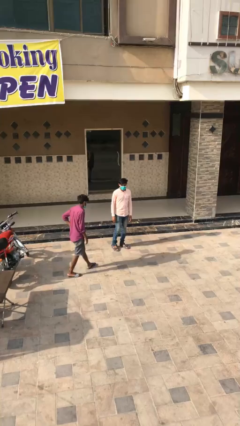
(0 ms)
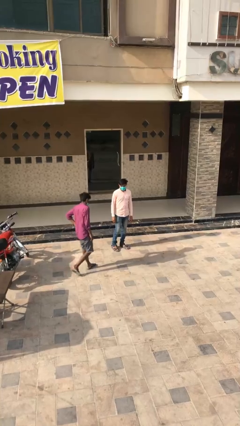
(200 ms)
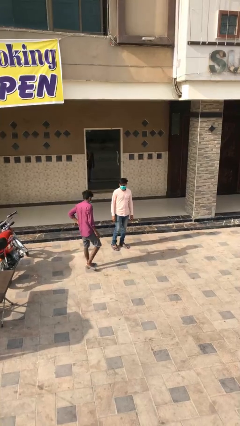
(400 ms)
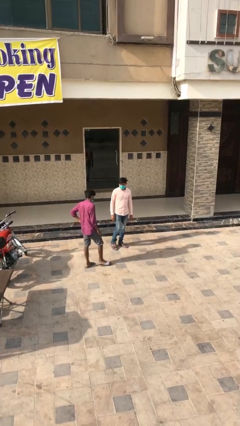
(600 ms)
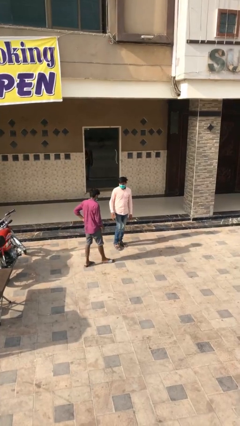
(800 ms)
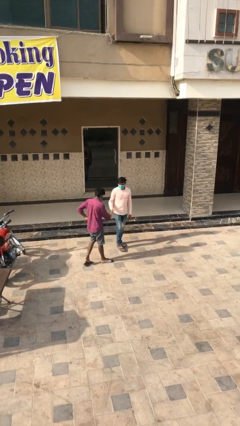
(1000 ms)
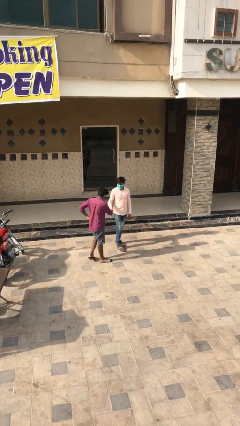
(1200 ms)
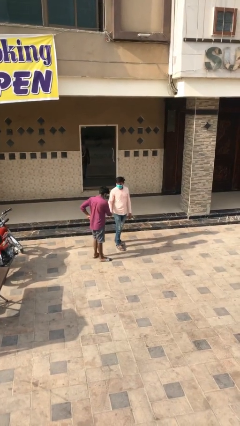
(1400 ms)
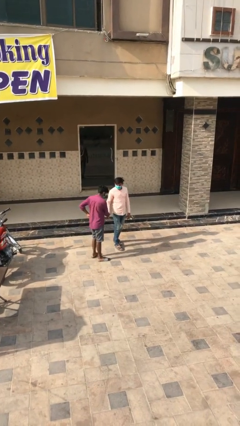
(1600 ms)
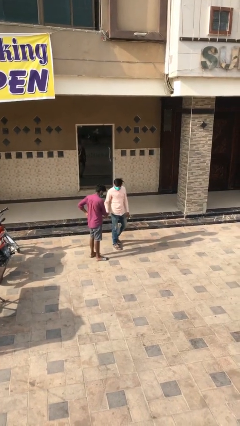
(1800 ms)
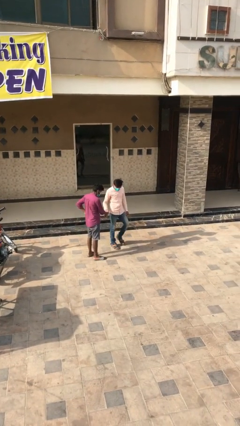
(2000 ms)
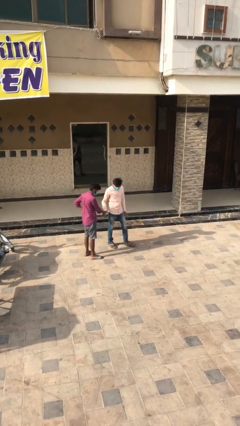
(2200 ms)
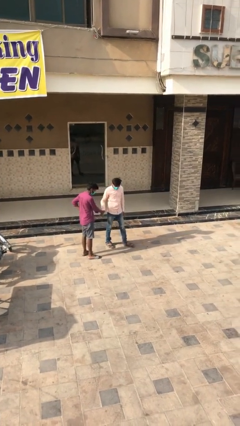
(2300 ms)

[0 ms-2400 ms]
person shakes hand

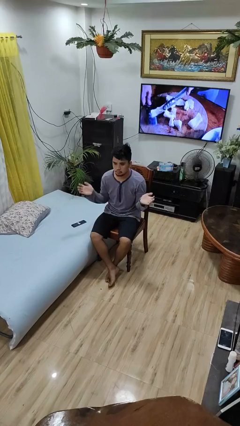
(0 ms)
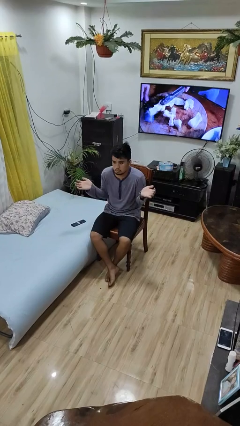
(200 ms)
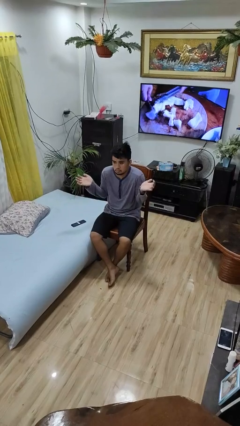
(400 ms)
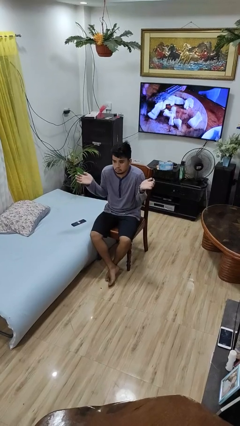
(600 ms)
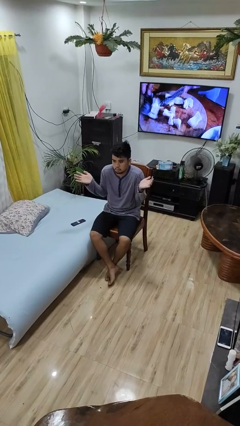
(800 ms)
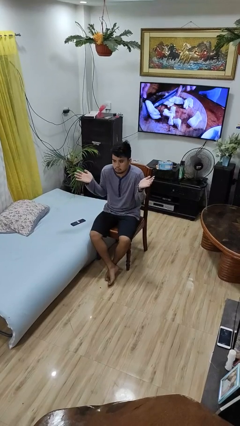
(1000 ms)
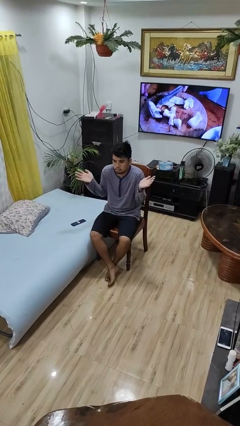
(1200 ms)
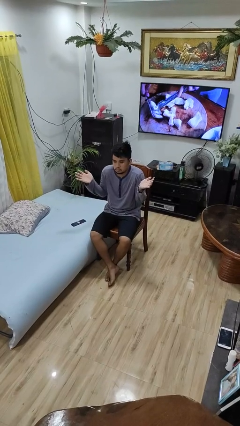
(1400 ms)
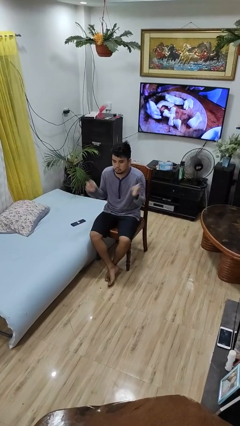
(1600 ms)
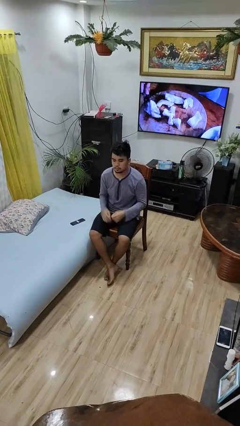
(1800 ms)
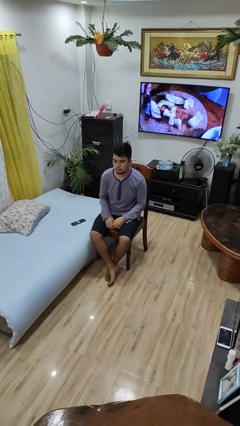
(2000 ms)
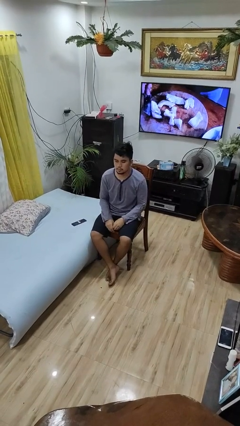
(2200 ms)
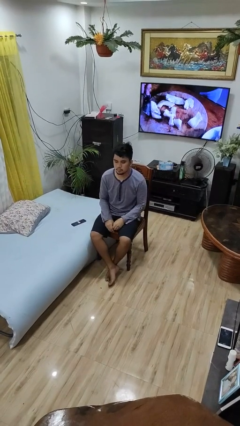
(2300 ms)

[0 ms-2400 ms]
person shrugs

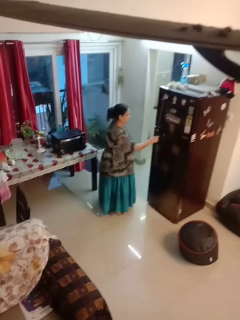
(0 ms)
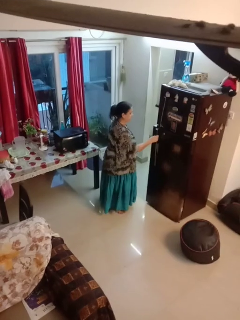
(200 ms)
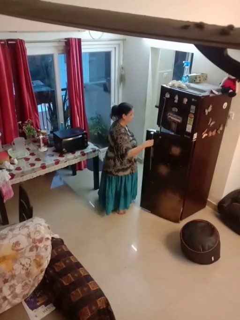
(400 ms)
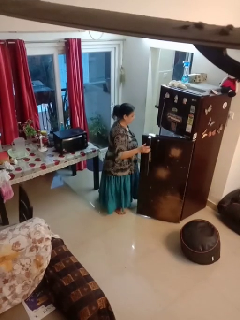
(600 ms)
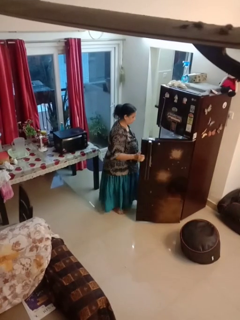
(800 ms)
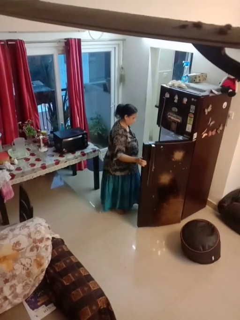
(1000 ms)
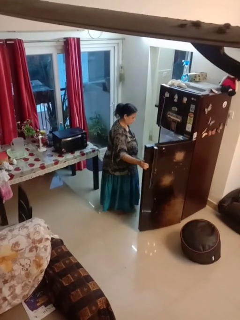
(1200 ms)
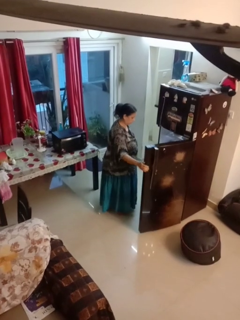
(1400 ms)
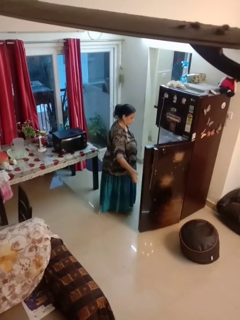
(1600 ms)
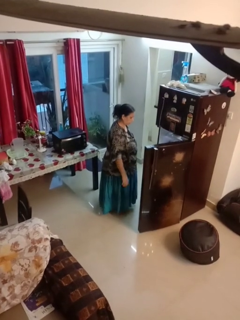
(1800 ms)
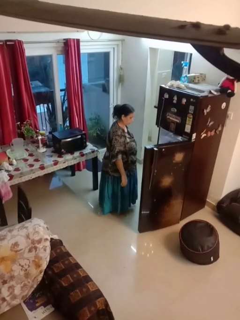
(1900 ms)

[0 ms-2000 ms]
person opens refrigerator

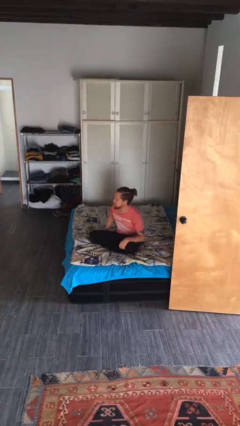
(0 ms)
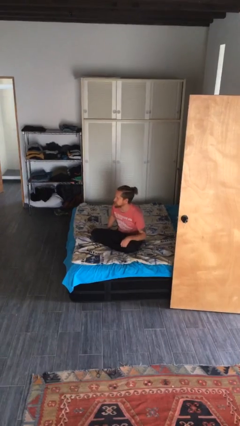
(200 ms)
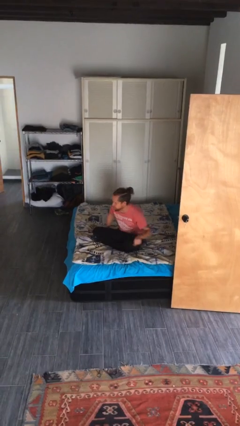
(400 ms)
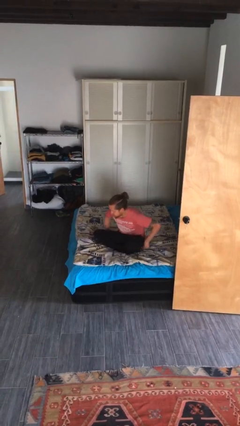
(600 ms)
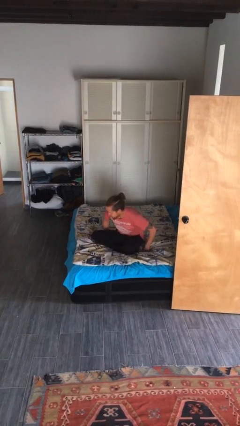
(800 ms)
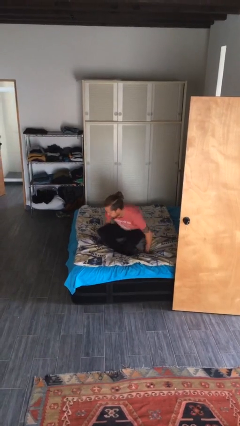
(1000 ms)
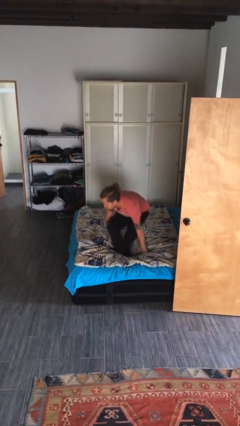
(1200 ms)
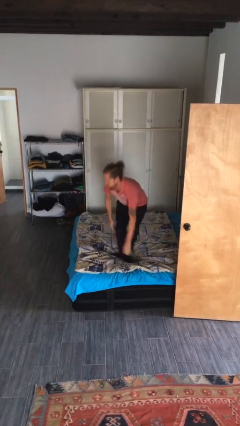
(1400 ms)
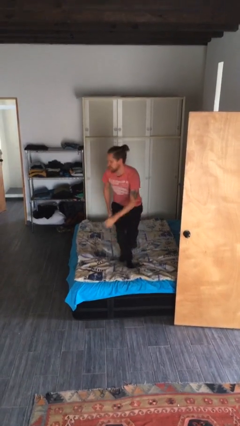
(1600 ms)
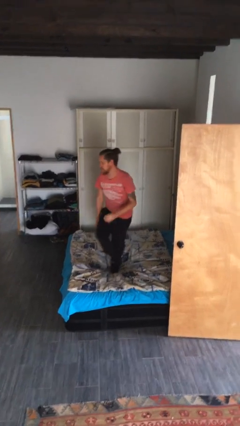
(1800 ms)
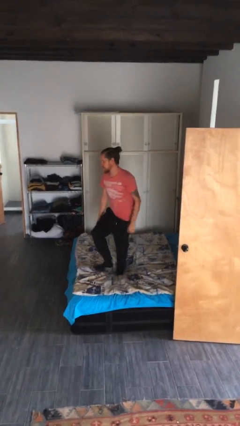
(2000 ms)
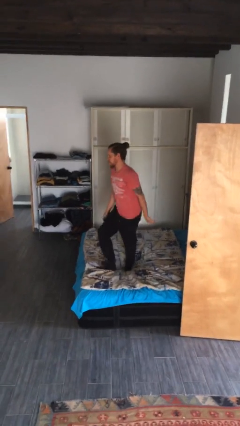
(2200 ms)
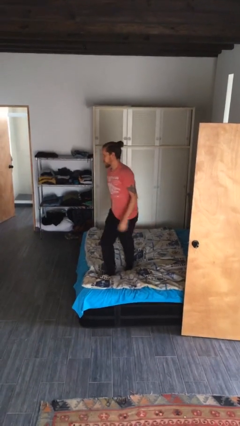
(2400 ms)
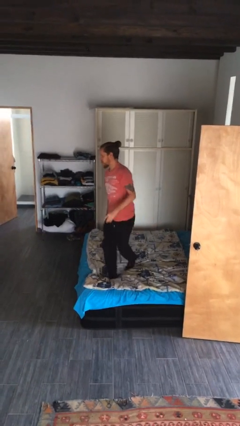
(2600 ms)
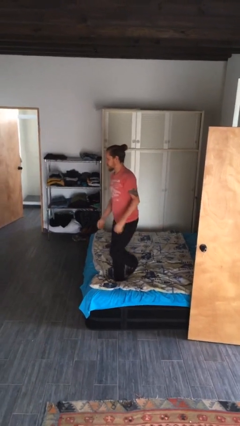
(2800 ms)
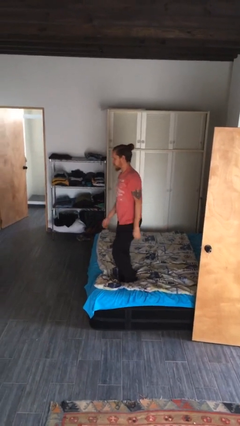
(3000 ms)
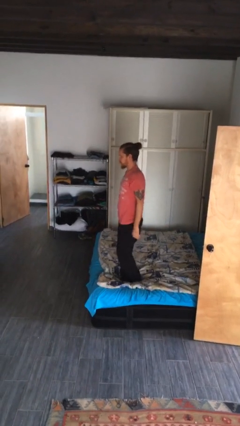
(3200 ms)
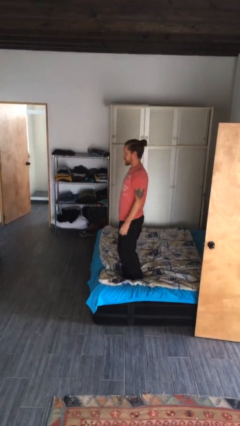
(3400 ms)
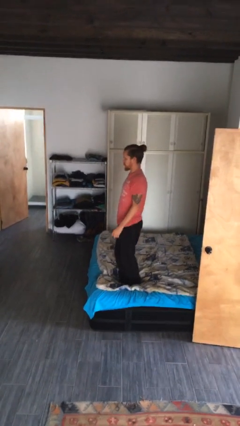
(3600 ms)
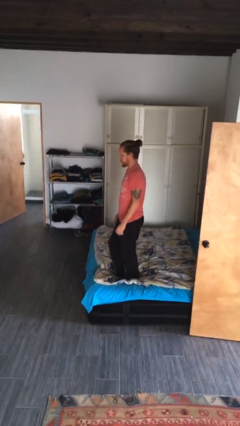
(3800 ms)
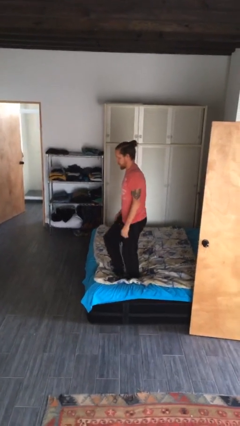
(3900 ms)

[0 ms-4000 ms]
person stands up from floor

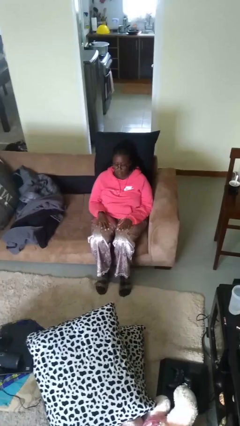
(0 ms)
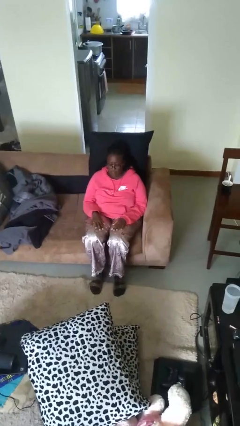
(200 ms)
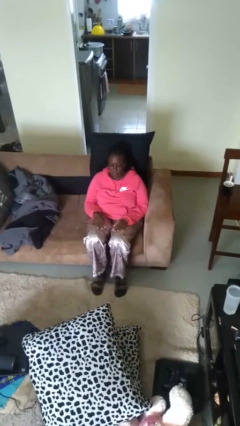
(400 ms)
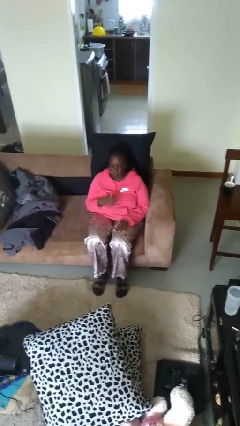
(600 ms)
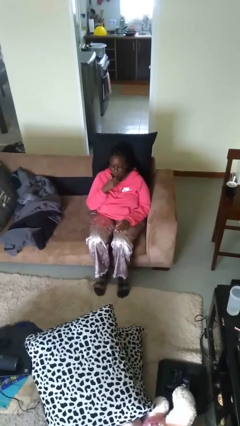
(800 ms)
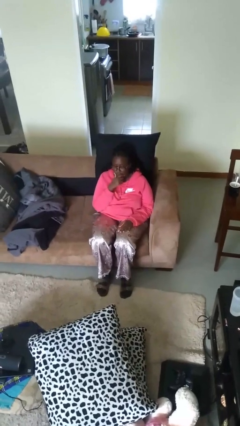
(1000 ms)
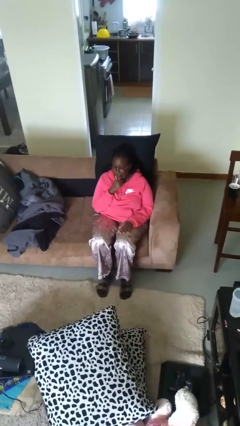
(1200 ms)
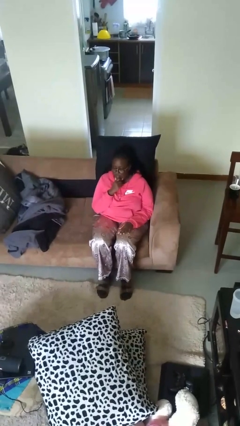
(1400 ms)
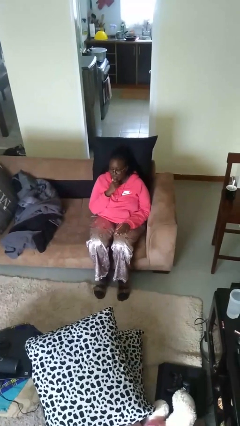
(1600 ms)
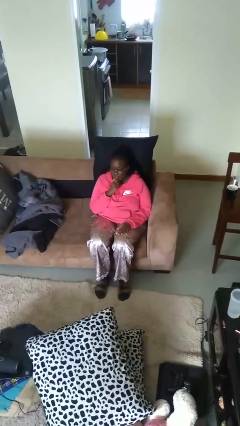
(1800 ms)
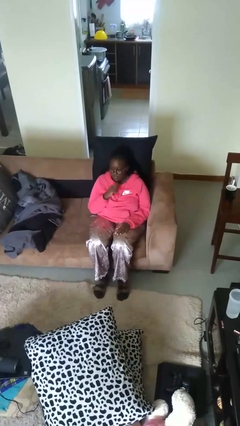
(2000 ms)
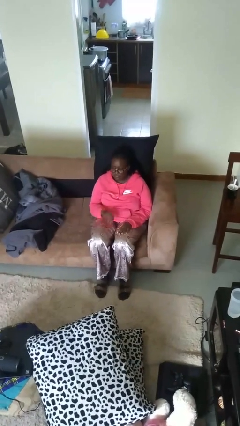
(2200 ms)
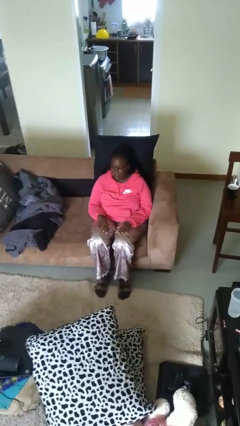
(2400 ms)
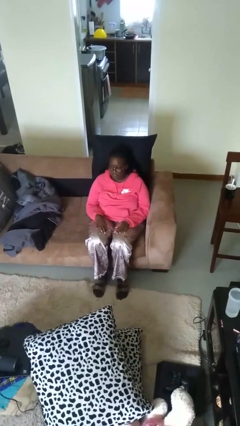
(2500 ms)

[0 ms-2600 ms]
person strokes chin

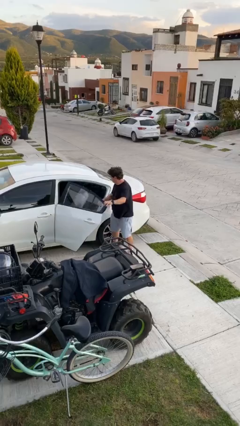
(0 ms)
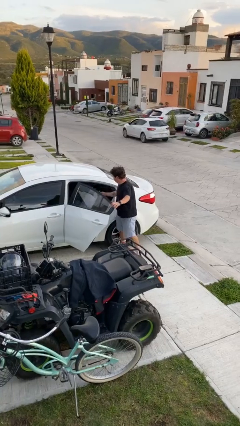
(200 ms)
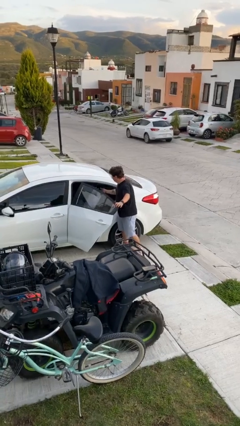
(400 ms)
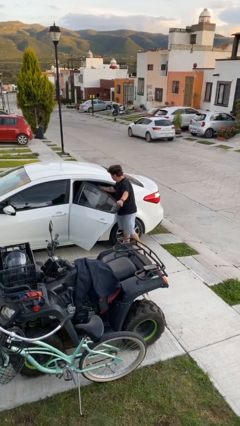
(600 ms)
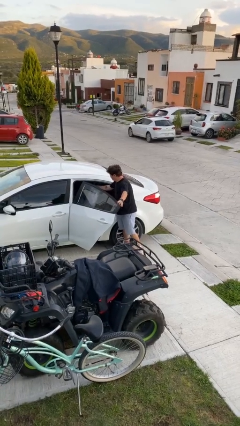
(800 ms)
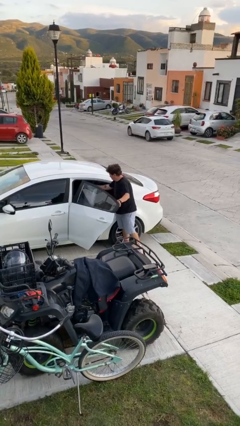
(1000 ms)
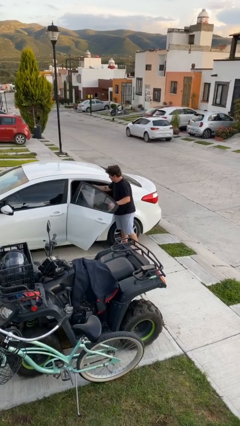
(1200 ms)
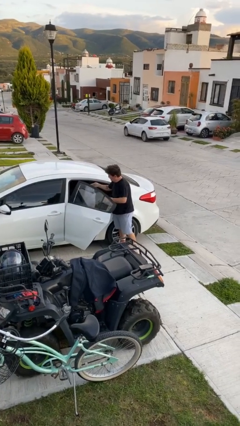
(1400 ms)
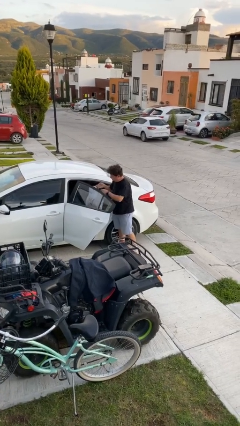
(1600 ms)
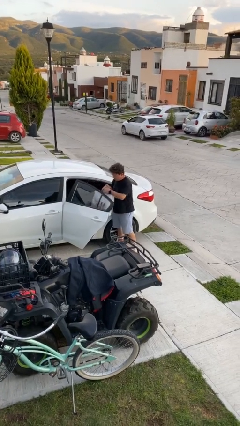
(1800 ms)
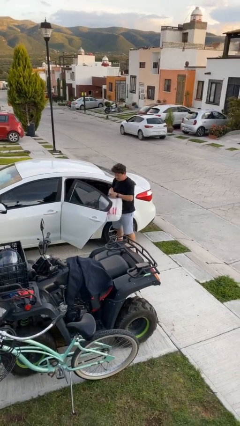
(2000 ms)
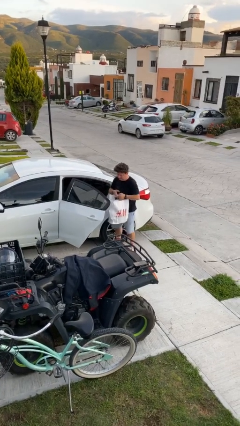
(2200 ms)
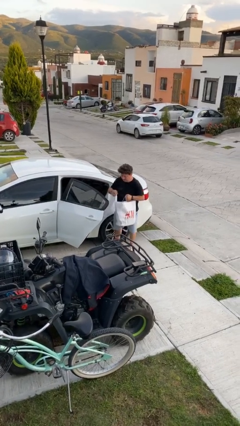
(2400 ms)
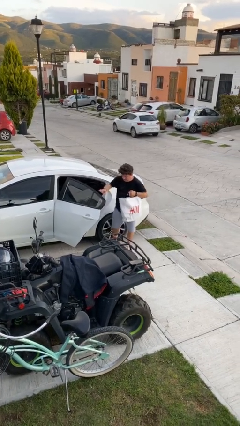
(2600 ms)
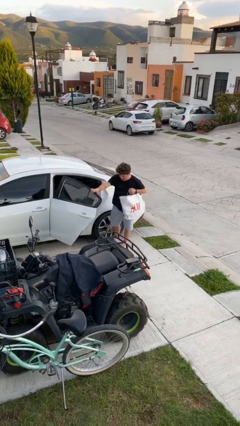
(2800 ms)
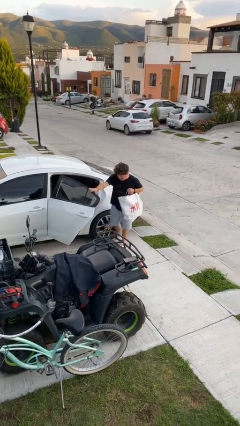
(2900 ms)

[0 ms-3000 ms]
person unloads car

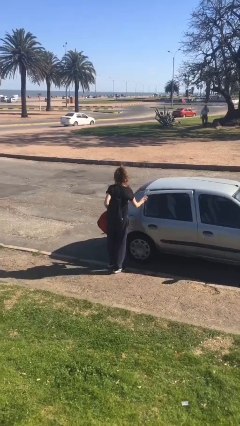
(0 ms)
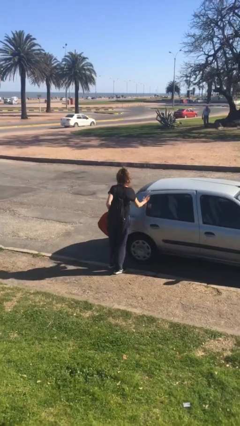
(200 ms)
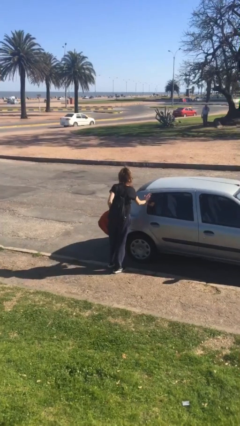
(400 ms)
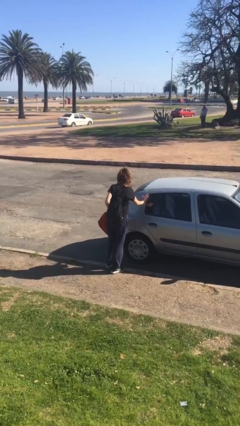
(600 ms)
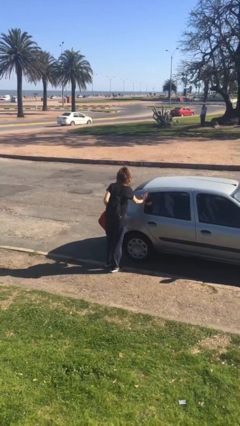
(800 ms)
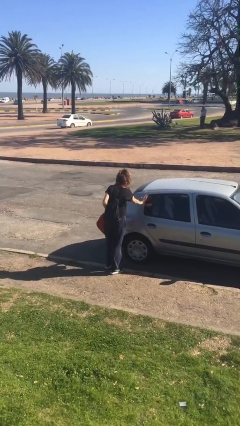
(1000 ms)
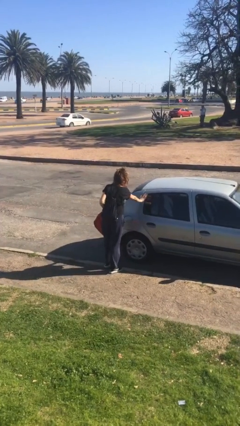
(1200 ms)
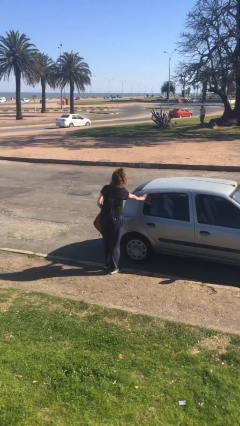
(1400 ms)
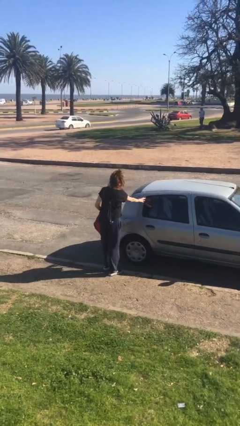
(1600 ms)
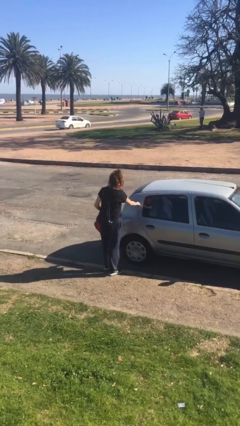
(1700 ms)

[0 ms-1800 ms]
person closes car door
